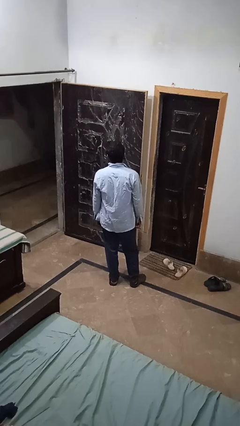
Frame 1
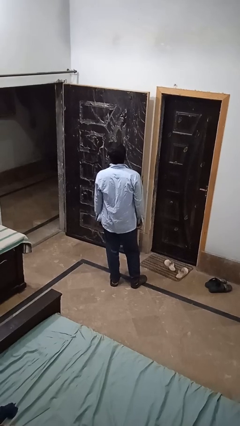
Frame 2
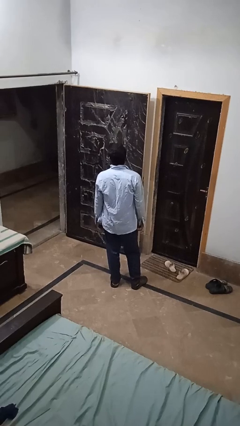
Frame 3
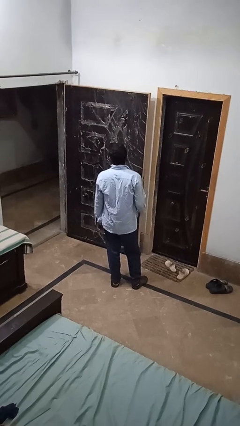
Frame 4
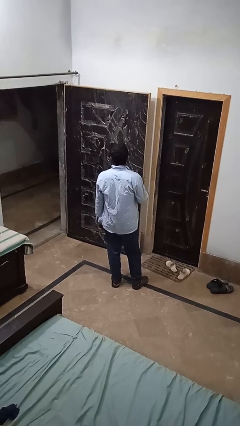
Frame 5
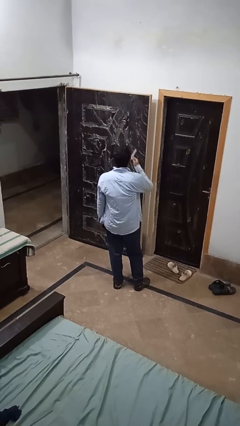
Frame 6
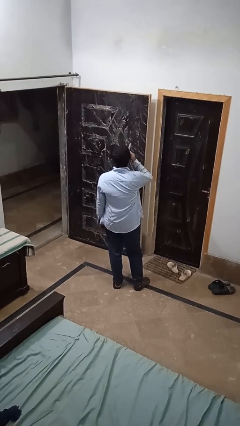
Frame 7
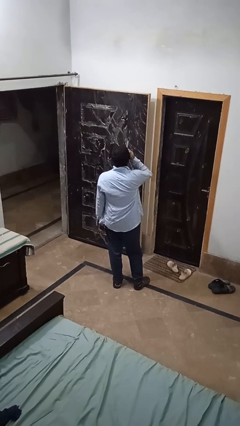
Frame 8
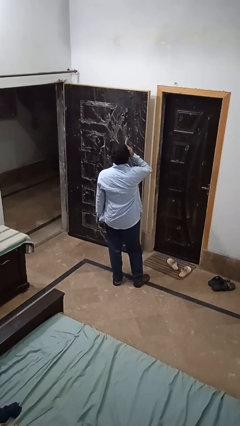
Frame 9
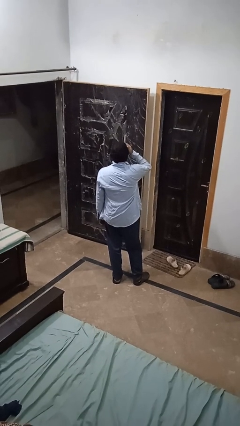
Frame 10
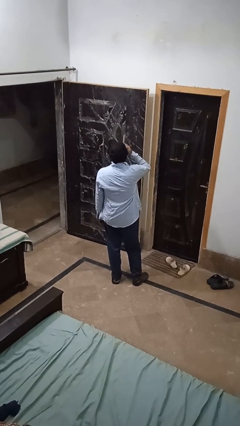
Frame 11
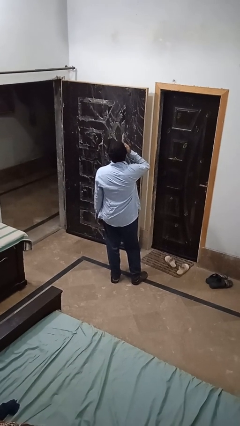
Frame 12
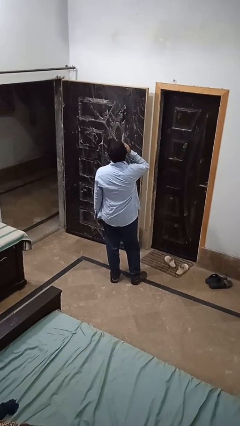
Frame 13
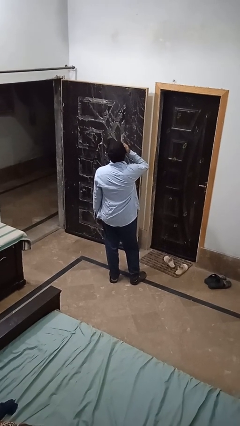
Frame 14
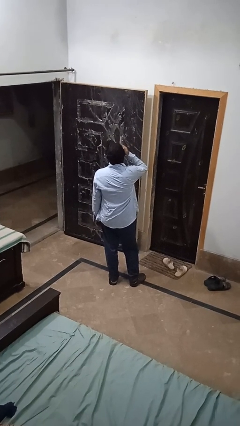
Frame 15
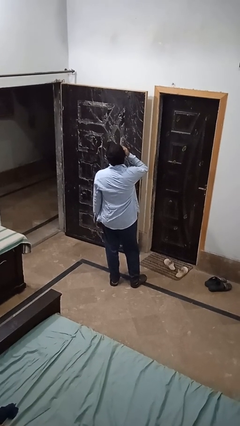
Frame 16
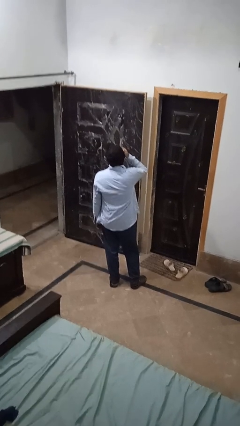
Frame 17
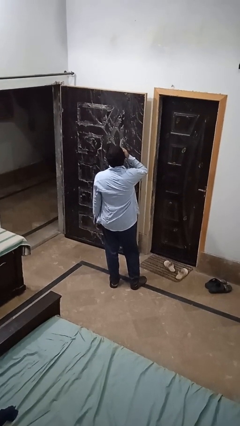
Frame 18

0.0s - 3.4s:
person vapes

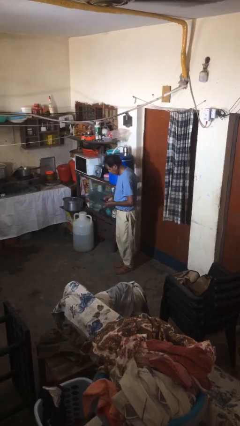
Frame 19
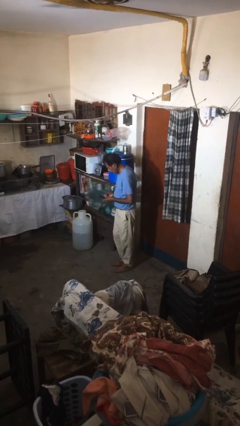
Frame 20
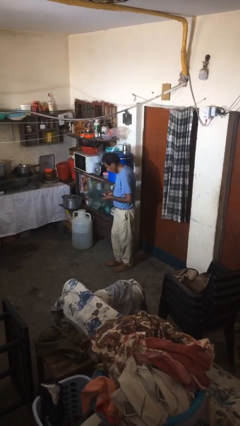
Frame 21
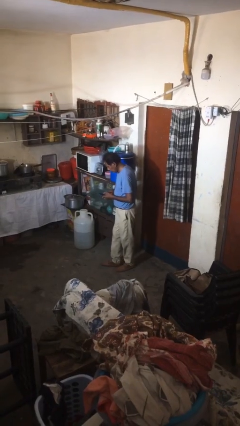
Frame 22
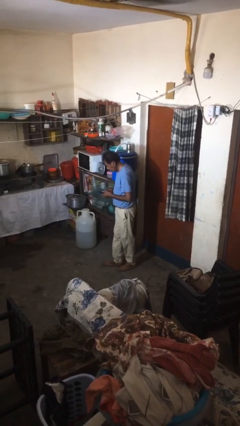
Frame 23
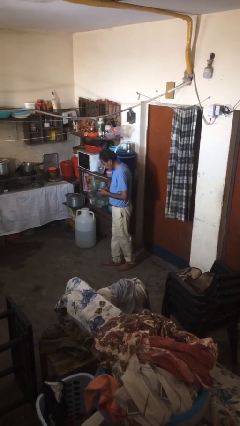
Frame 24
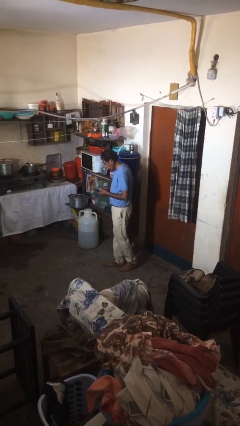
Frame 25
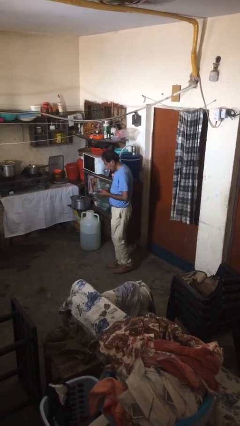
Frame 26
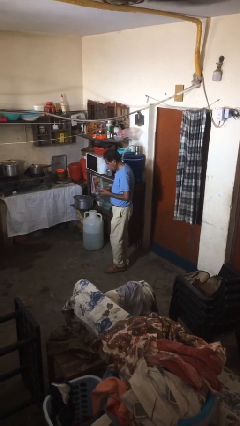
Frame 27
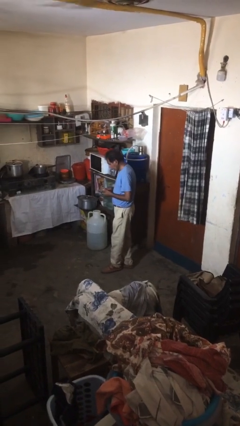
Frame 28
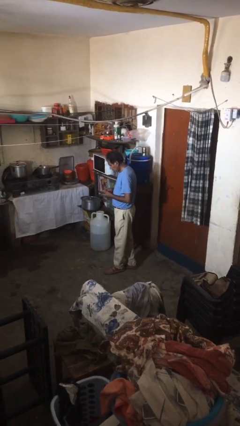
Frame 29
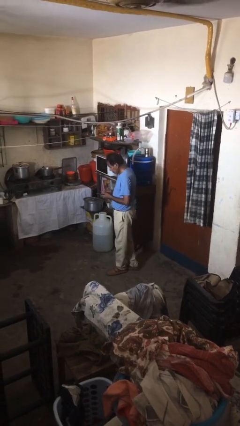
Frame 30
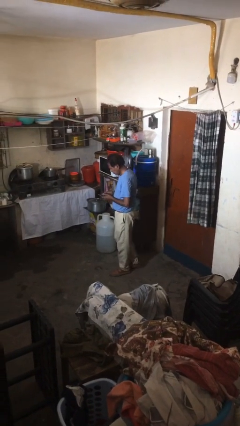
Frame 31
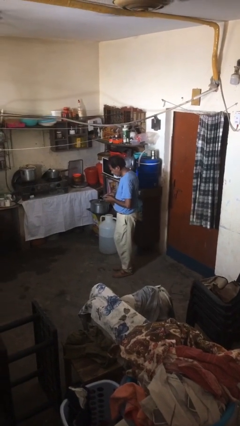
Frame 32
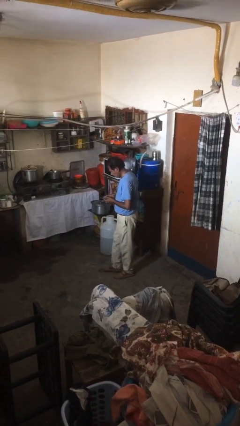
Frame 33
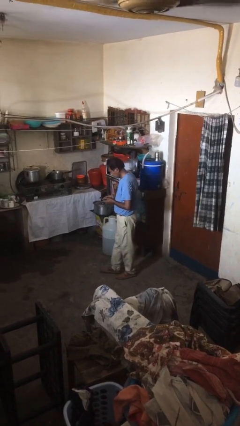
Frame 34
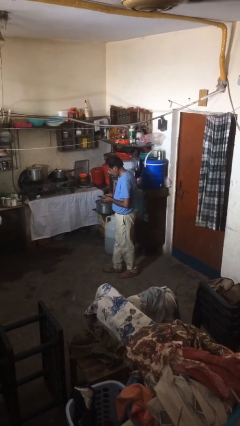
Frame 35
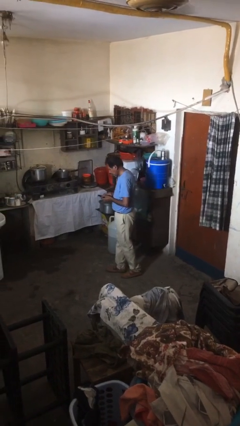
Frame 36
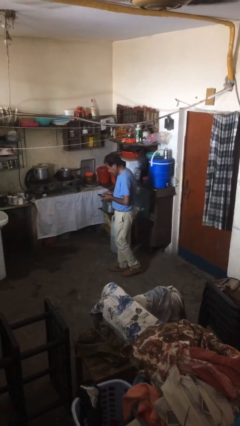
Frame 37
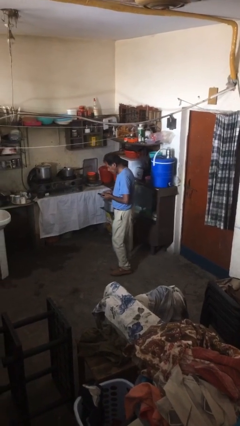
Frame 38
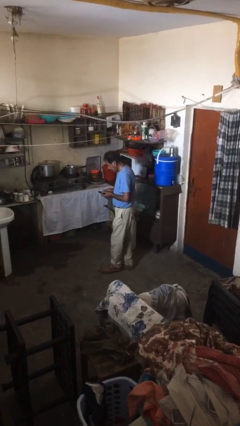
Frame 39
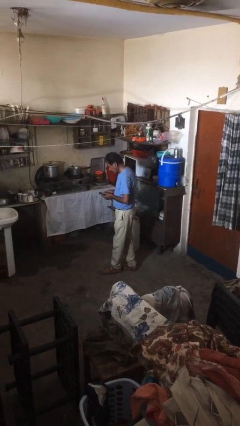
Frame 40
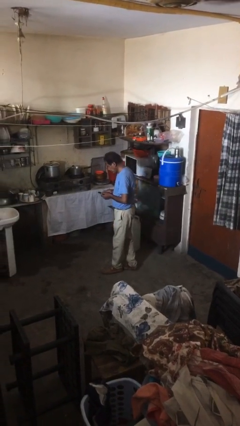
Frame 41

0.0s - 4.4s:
person texts on phone

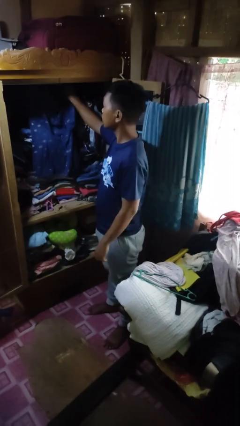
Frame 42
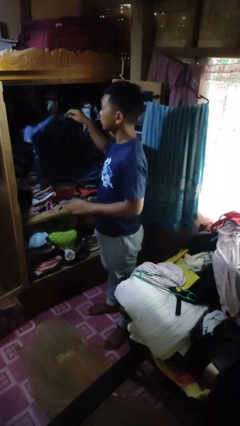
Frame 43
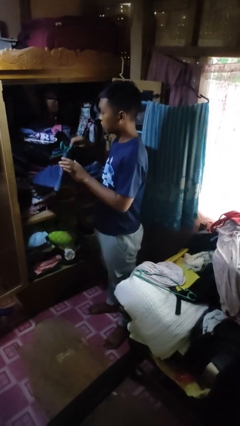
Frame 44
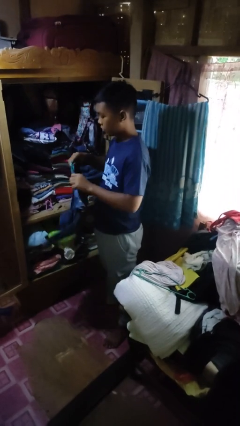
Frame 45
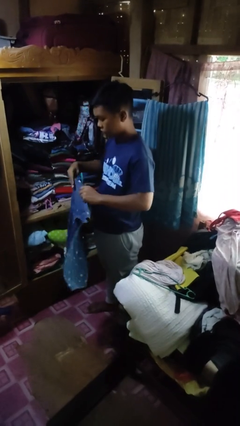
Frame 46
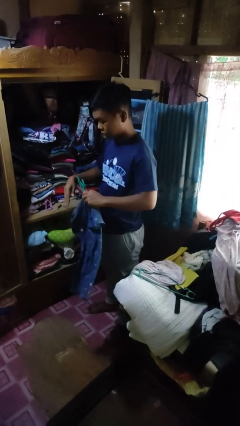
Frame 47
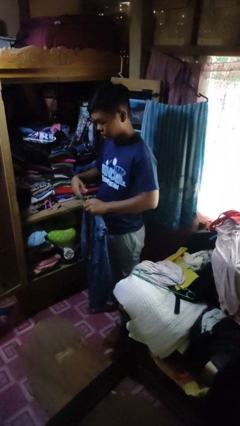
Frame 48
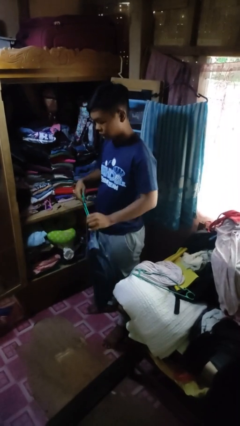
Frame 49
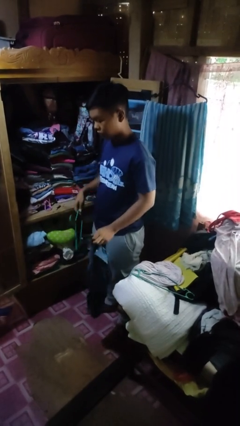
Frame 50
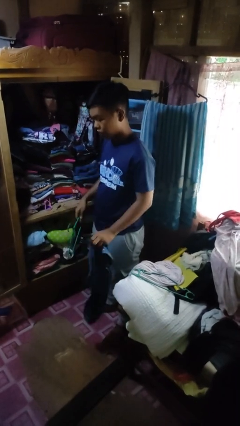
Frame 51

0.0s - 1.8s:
person takes clothes from closet

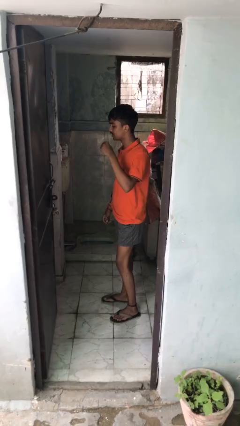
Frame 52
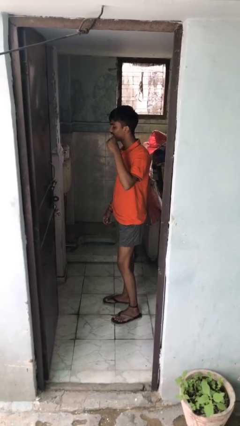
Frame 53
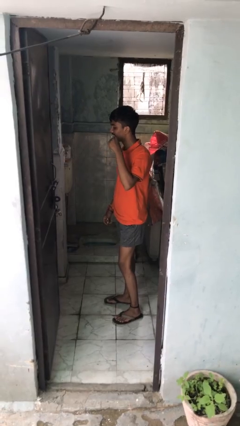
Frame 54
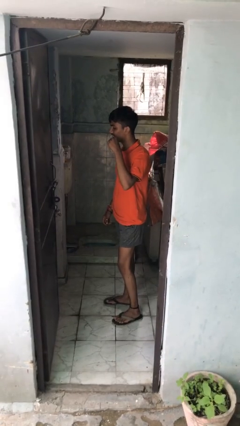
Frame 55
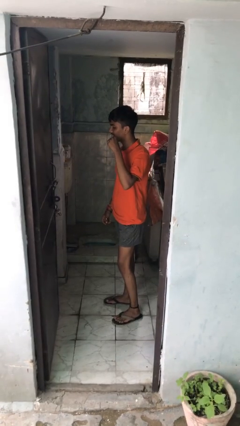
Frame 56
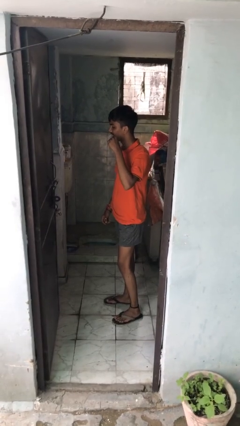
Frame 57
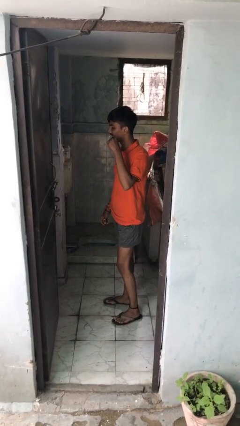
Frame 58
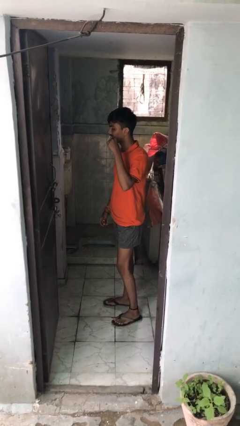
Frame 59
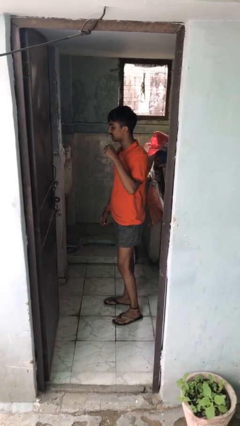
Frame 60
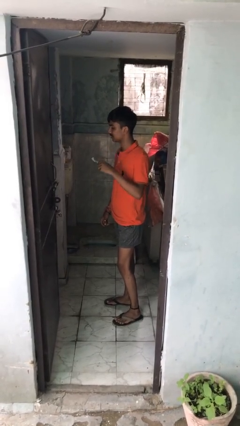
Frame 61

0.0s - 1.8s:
person brushes teeth

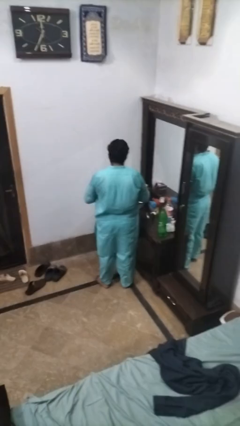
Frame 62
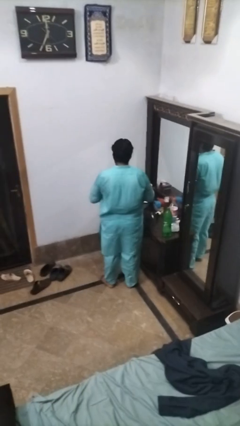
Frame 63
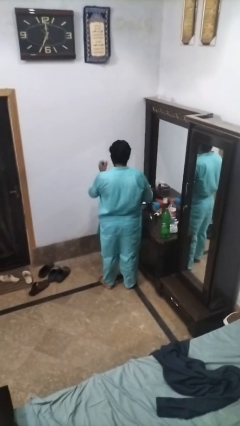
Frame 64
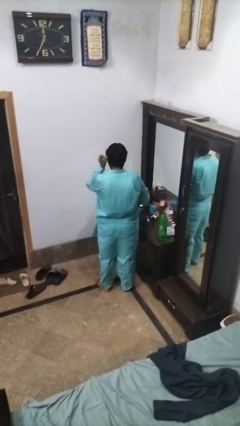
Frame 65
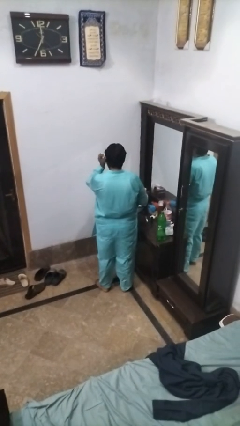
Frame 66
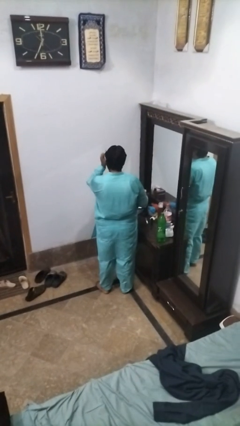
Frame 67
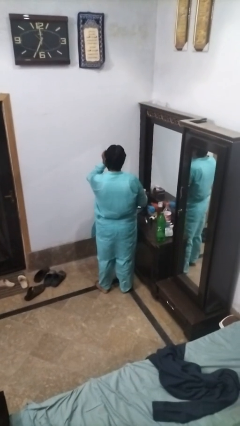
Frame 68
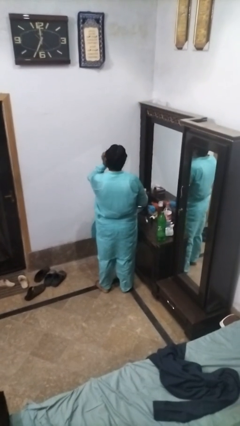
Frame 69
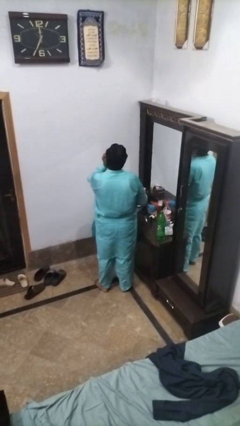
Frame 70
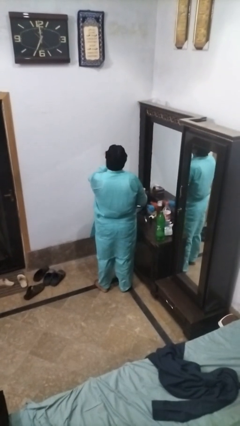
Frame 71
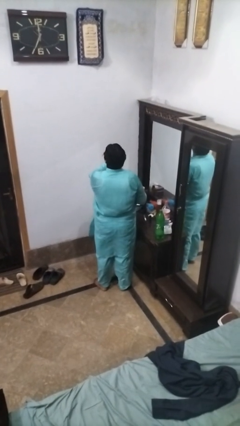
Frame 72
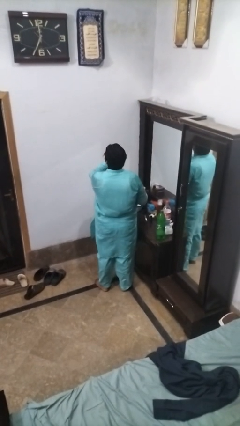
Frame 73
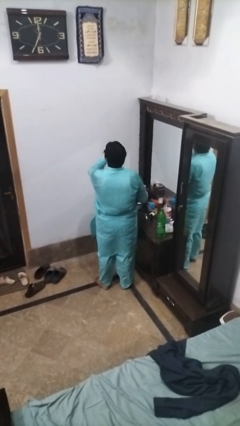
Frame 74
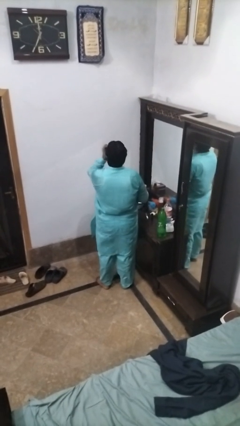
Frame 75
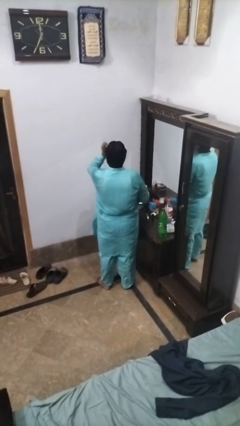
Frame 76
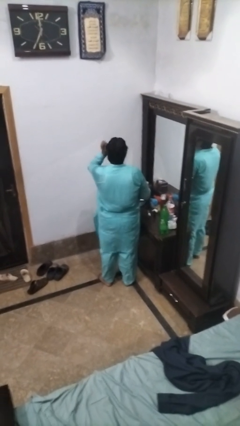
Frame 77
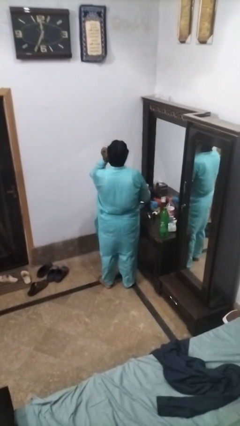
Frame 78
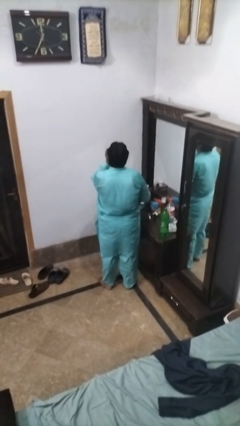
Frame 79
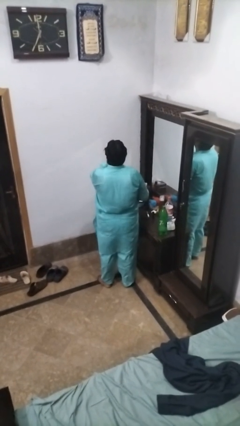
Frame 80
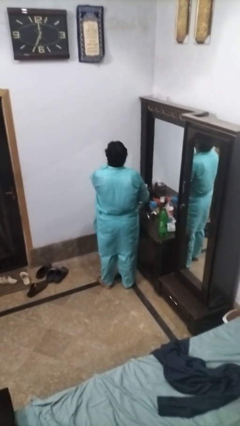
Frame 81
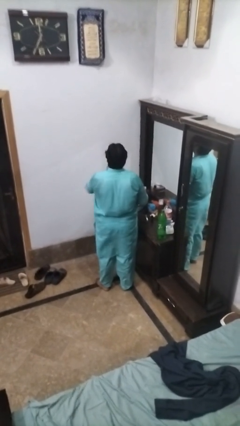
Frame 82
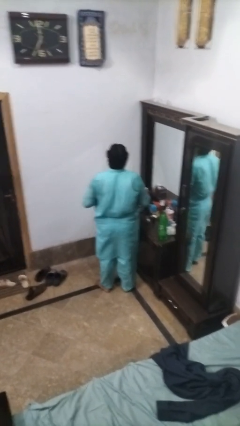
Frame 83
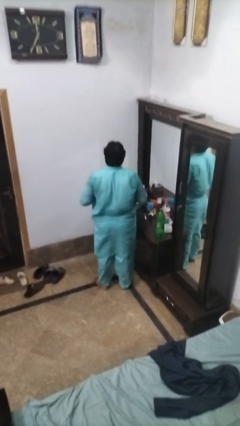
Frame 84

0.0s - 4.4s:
person applies foundation makeup

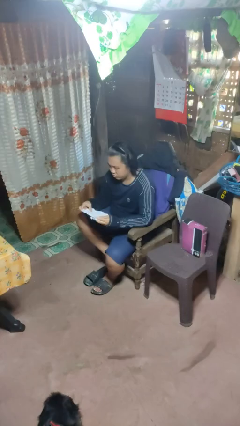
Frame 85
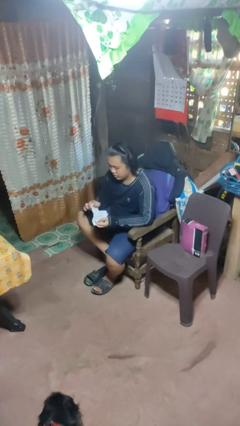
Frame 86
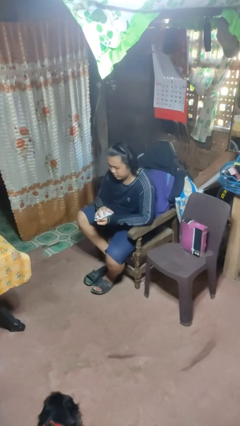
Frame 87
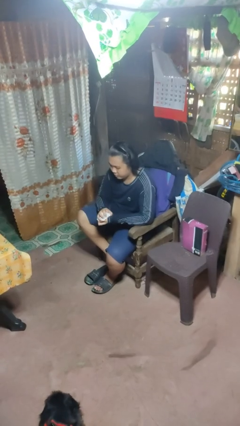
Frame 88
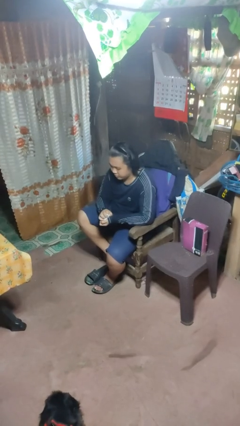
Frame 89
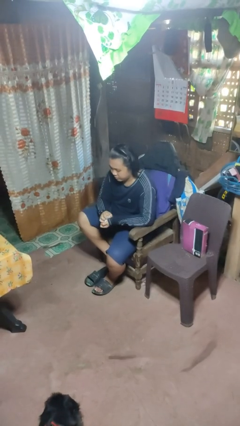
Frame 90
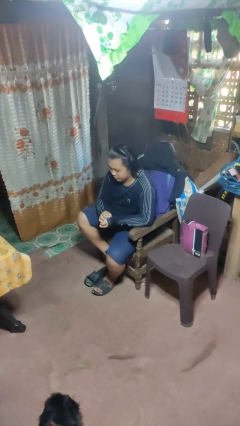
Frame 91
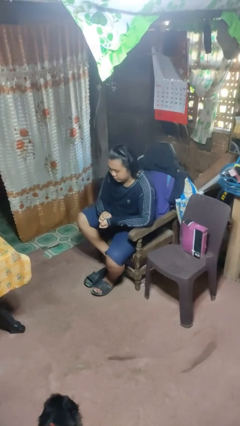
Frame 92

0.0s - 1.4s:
person crumples paper

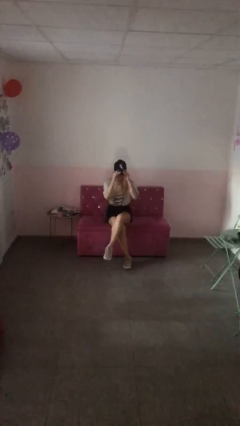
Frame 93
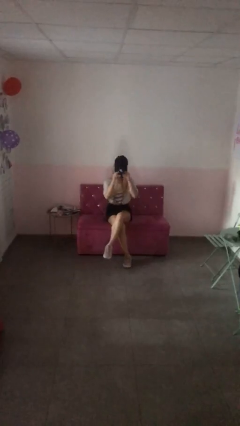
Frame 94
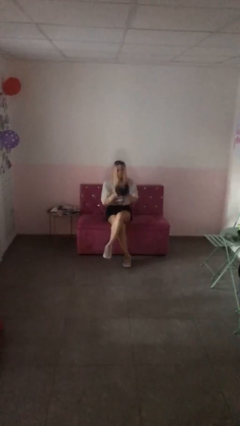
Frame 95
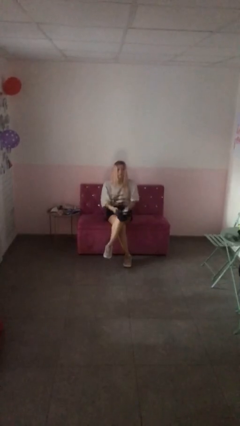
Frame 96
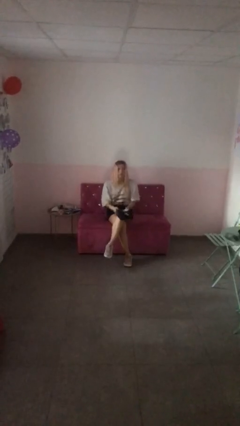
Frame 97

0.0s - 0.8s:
person takes off hat
